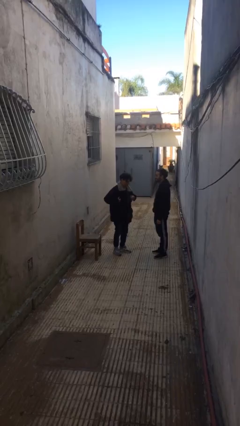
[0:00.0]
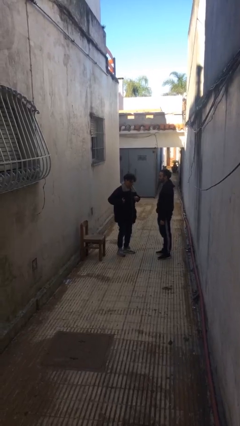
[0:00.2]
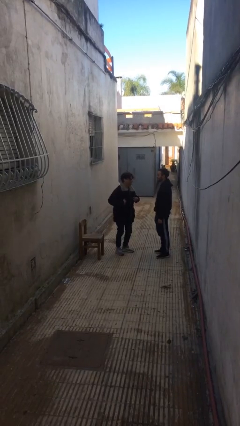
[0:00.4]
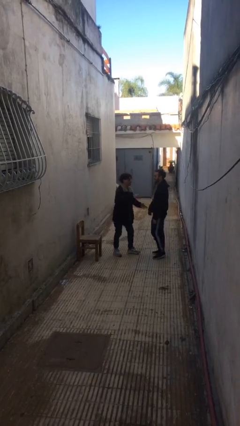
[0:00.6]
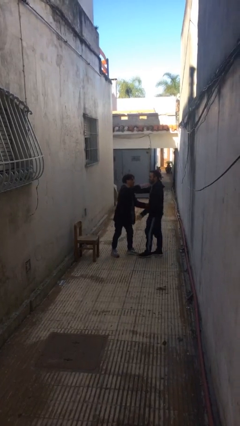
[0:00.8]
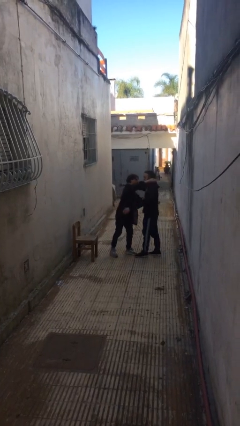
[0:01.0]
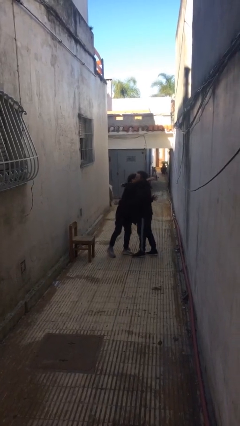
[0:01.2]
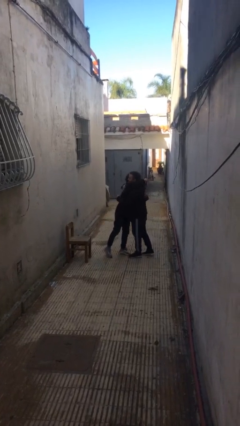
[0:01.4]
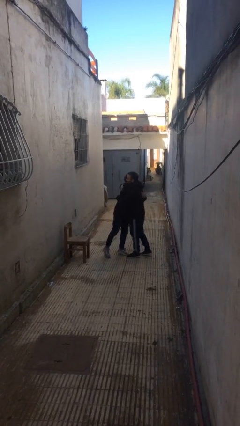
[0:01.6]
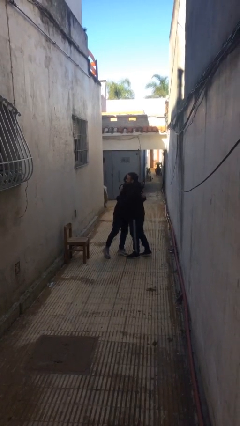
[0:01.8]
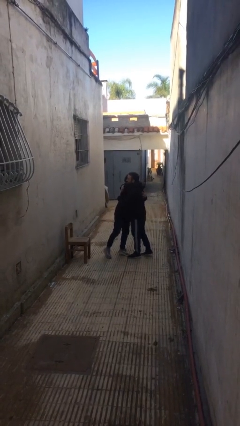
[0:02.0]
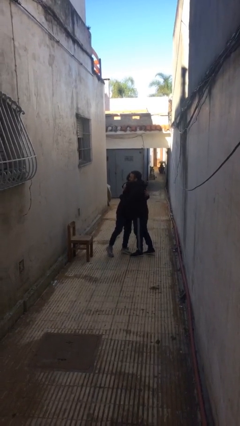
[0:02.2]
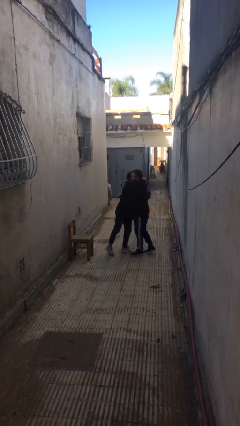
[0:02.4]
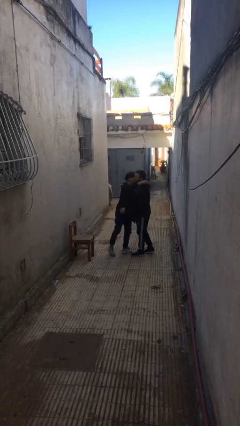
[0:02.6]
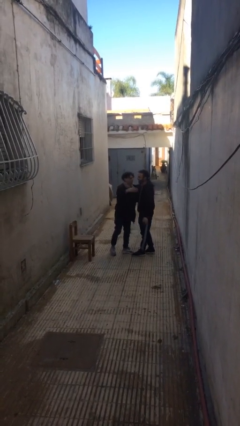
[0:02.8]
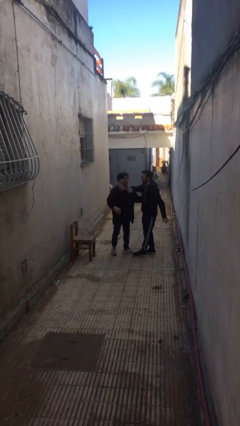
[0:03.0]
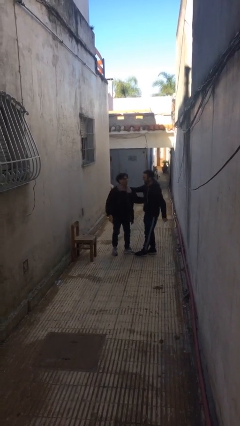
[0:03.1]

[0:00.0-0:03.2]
person embraces person

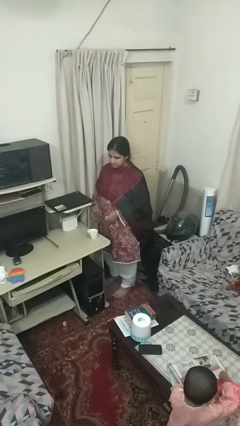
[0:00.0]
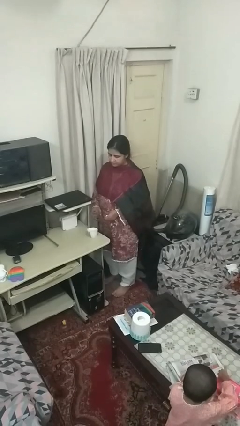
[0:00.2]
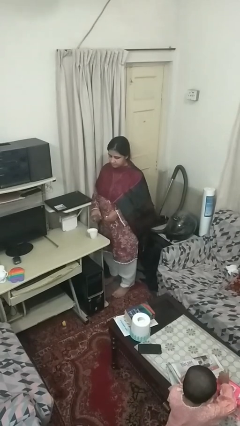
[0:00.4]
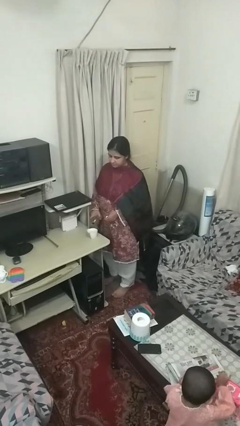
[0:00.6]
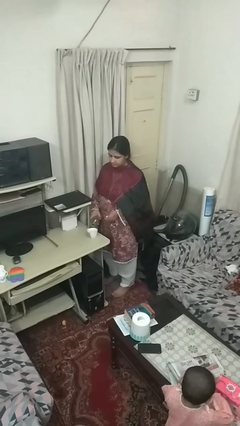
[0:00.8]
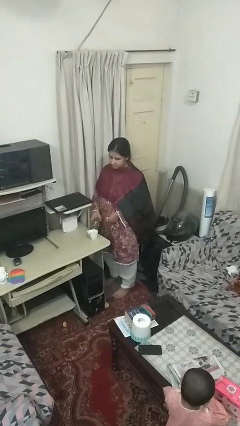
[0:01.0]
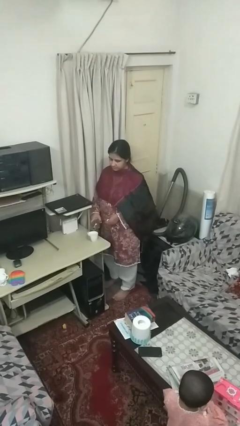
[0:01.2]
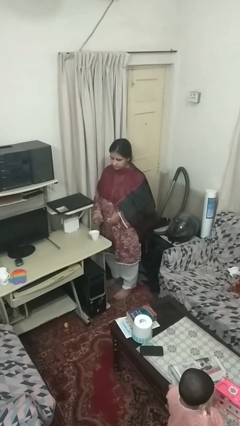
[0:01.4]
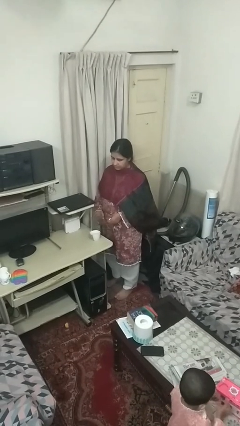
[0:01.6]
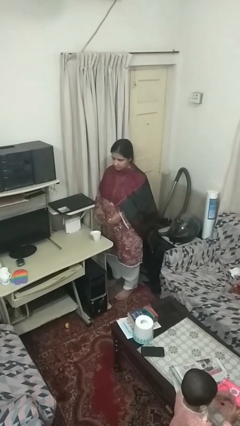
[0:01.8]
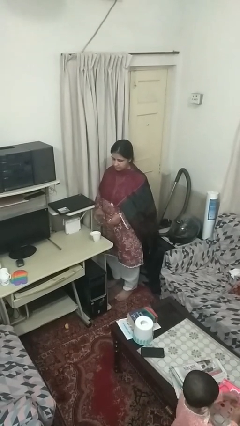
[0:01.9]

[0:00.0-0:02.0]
person pours liquid into cup

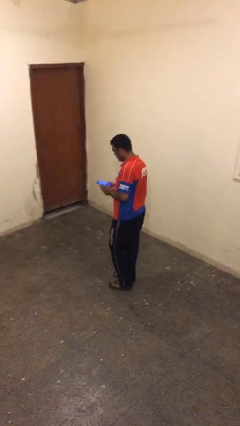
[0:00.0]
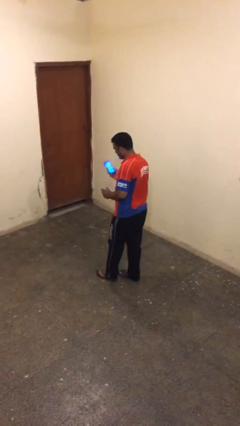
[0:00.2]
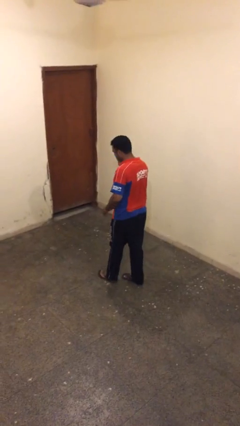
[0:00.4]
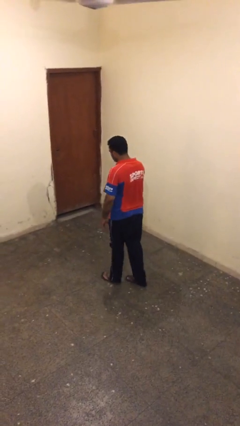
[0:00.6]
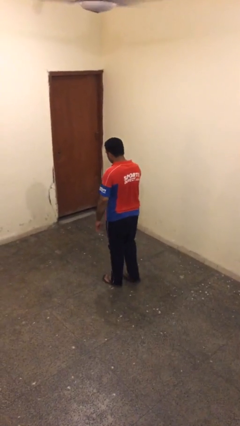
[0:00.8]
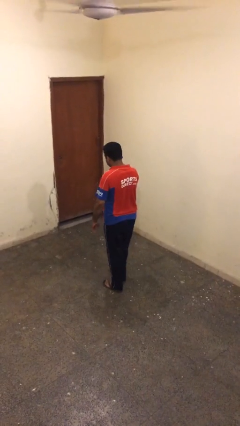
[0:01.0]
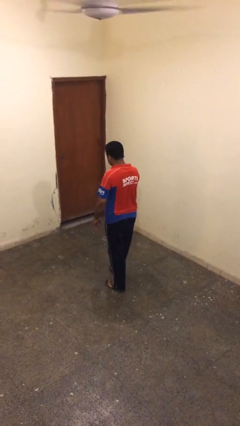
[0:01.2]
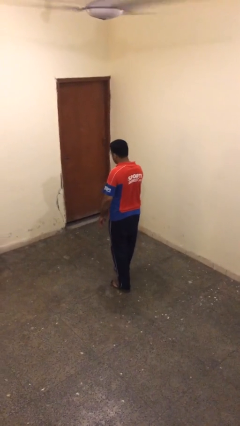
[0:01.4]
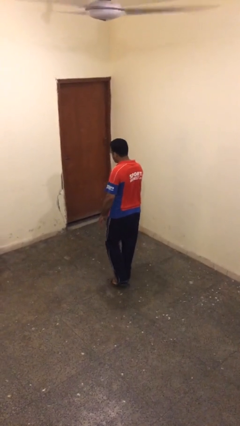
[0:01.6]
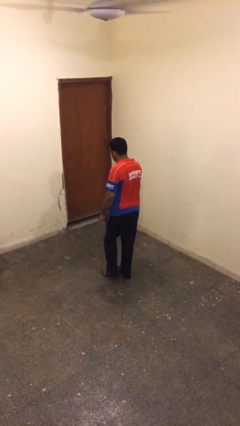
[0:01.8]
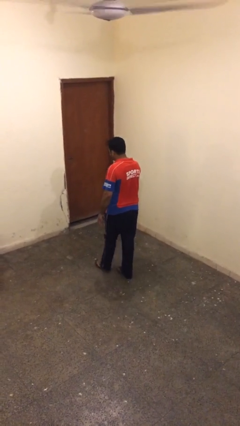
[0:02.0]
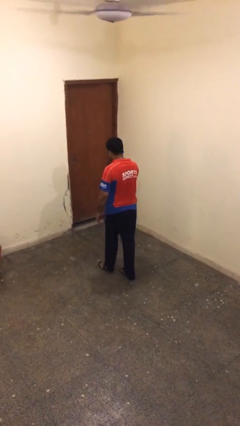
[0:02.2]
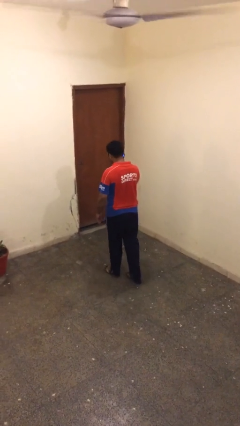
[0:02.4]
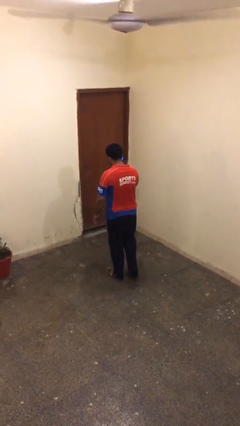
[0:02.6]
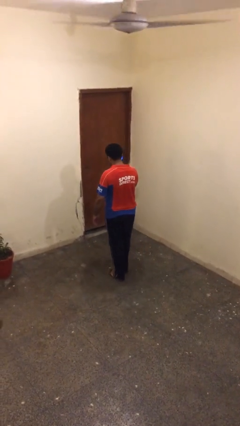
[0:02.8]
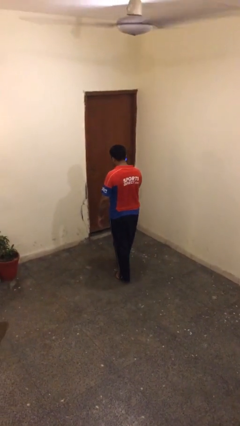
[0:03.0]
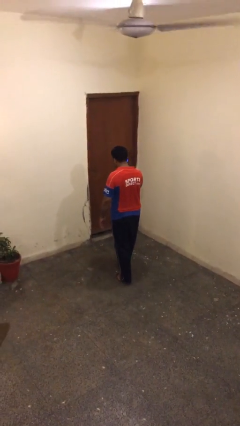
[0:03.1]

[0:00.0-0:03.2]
person talks on phone

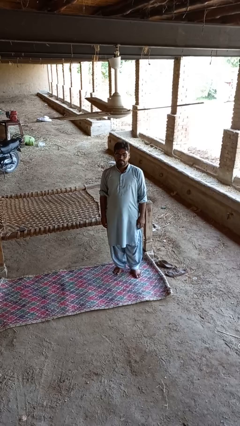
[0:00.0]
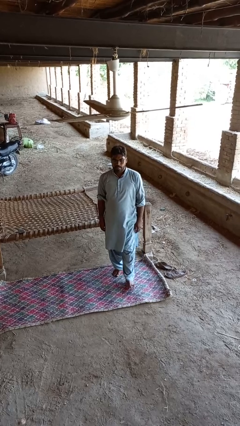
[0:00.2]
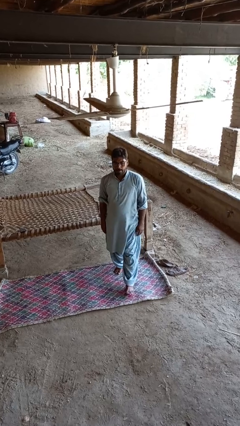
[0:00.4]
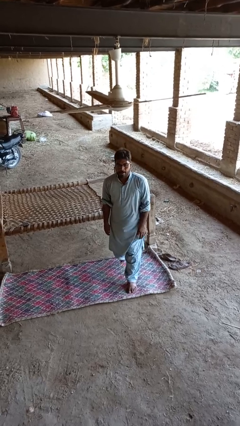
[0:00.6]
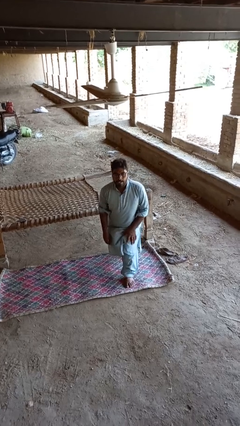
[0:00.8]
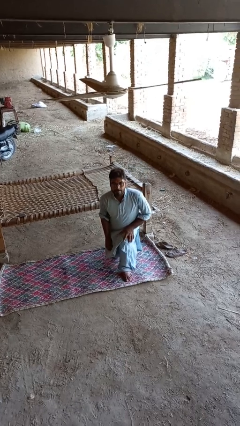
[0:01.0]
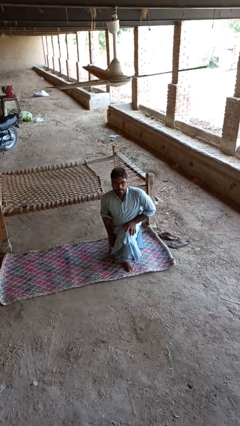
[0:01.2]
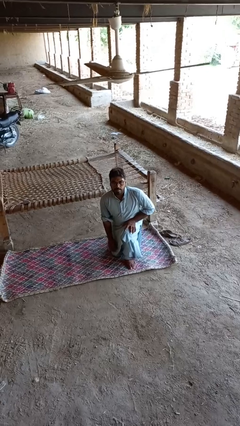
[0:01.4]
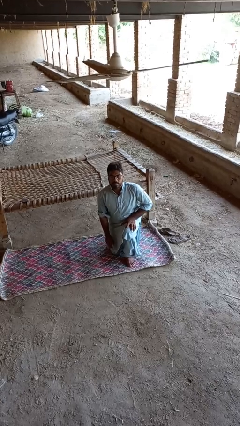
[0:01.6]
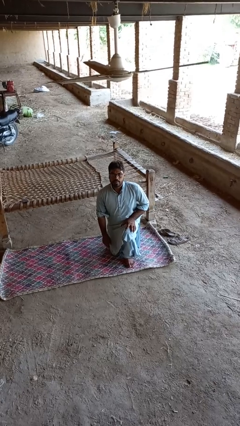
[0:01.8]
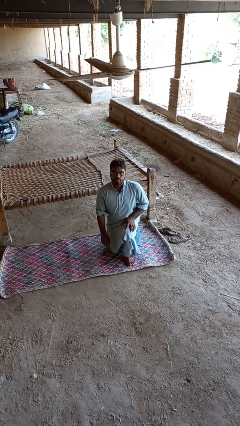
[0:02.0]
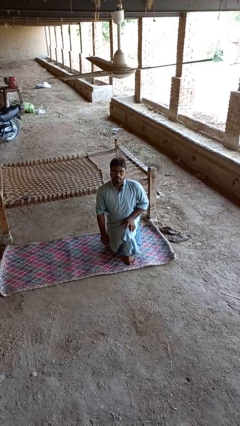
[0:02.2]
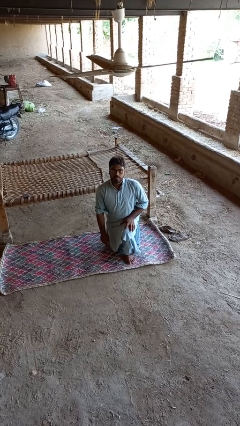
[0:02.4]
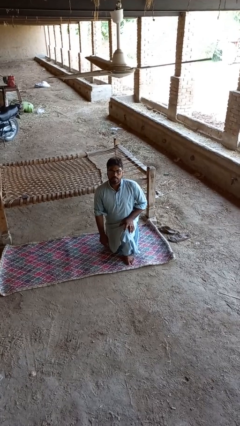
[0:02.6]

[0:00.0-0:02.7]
person kneels

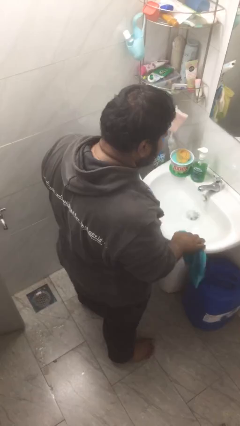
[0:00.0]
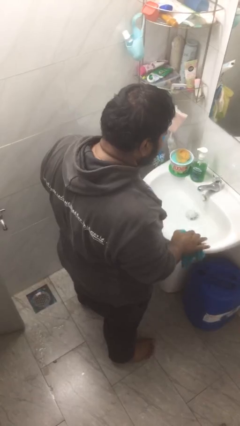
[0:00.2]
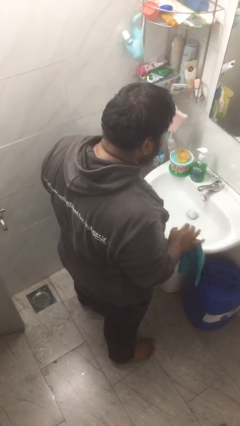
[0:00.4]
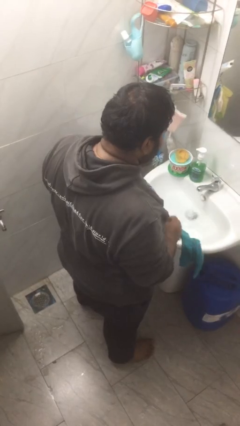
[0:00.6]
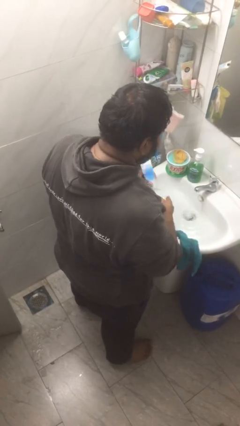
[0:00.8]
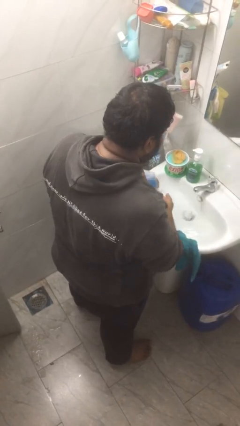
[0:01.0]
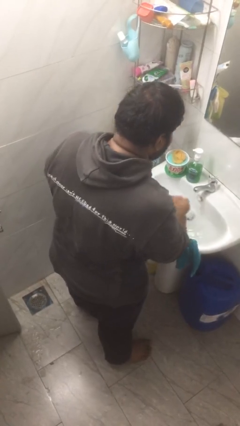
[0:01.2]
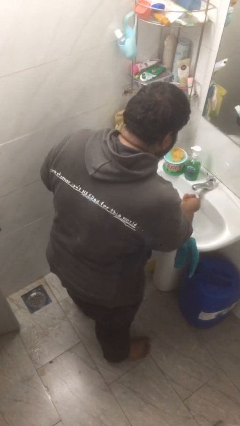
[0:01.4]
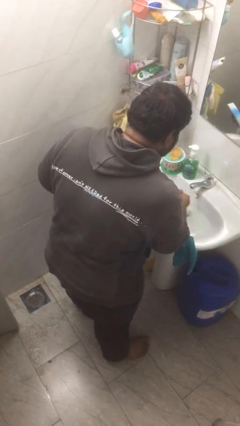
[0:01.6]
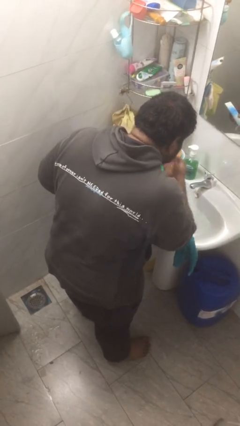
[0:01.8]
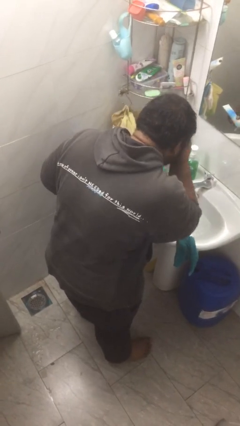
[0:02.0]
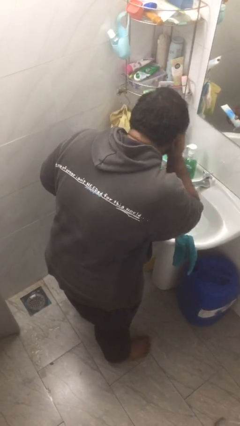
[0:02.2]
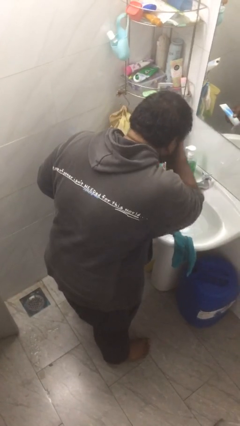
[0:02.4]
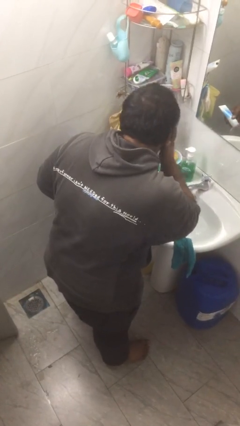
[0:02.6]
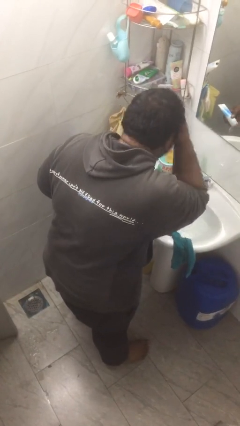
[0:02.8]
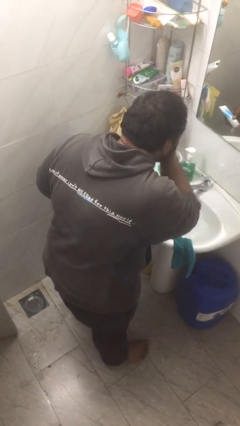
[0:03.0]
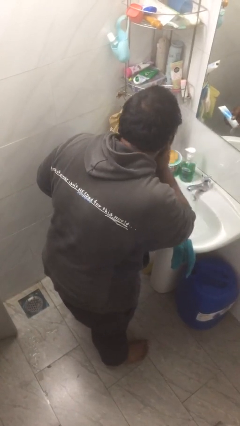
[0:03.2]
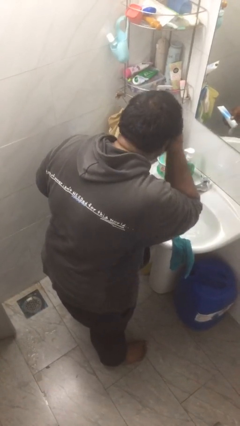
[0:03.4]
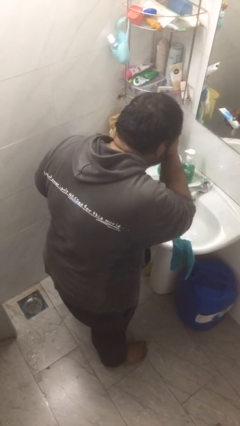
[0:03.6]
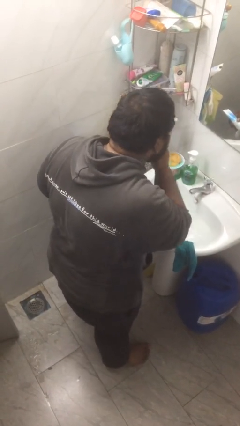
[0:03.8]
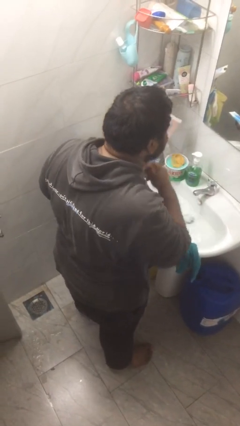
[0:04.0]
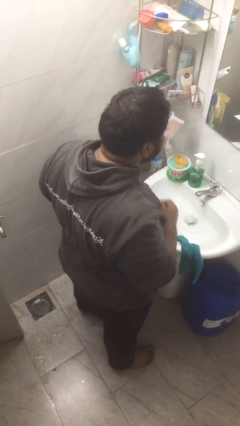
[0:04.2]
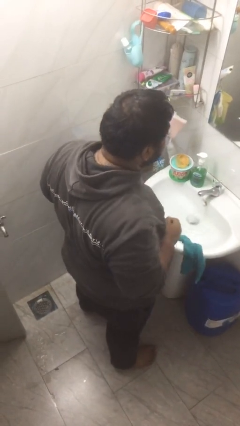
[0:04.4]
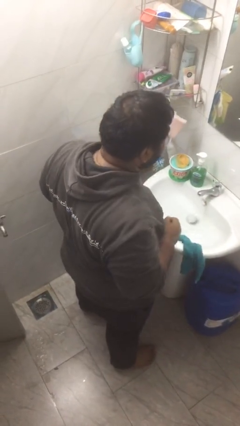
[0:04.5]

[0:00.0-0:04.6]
person washes face

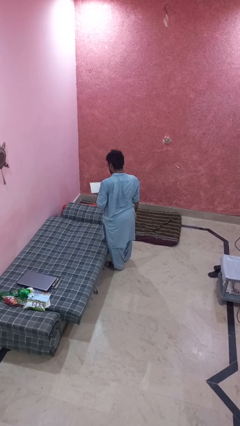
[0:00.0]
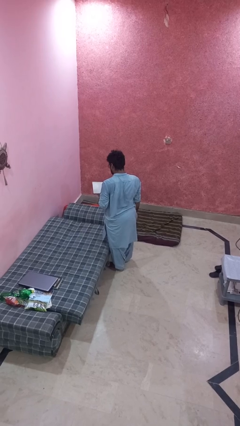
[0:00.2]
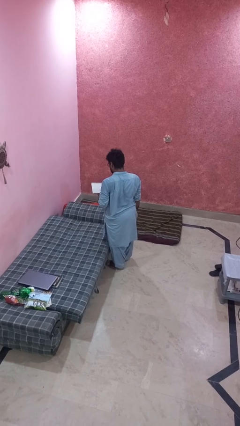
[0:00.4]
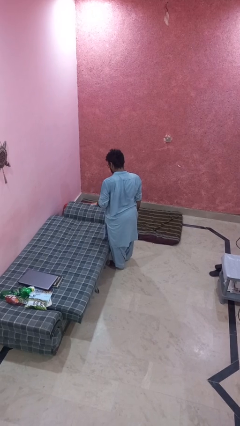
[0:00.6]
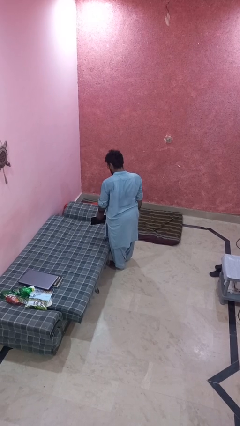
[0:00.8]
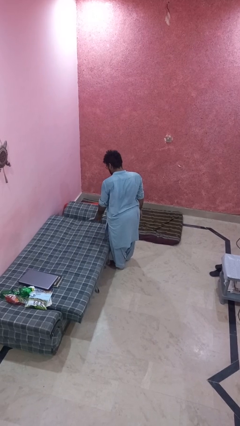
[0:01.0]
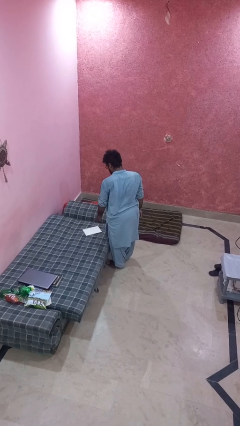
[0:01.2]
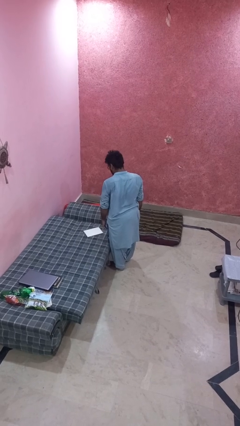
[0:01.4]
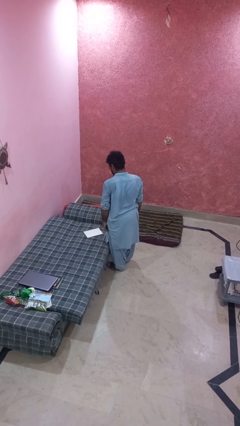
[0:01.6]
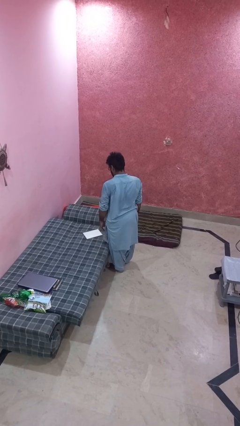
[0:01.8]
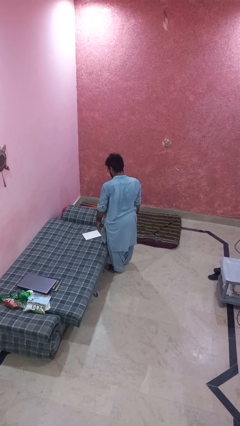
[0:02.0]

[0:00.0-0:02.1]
person puts down object on bed
